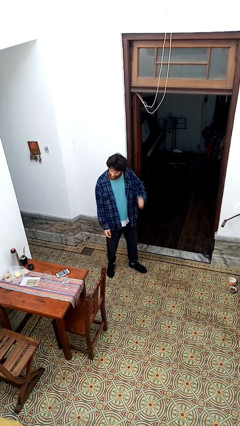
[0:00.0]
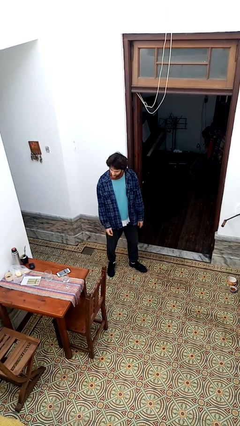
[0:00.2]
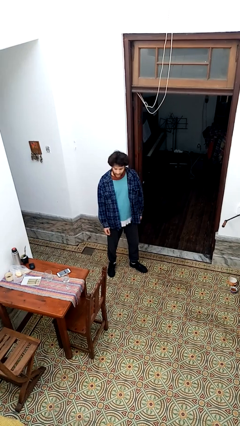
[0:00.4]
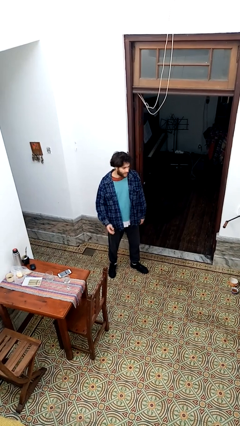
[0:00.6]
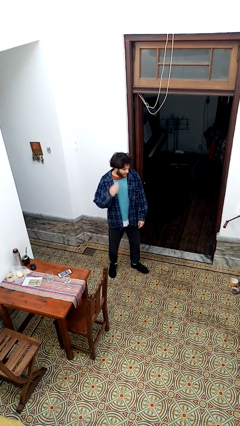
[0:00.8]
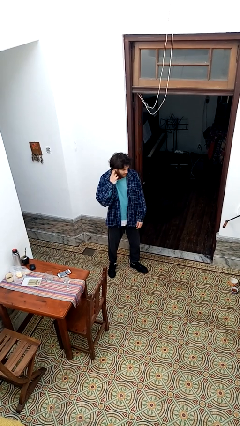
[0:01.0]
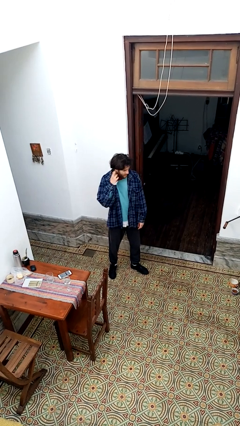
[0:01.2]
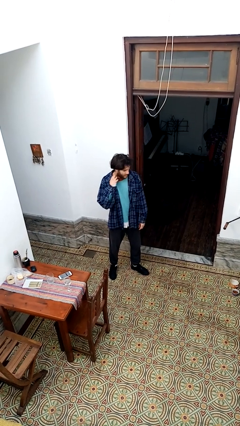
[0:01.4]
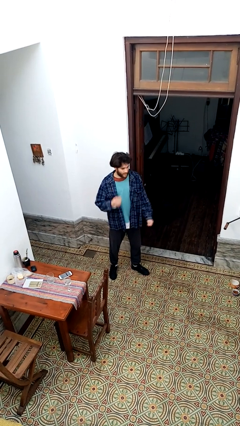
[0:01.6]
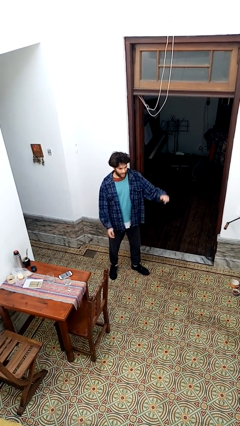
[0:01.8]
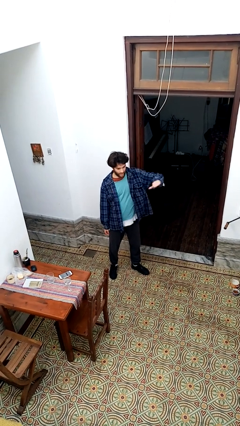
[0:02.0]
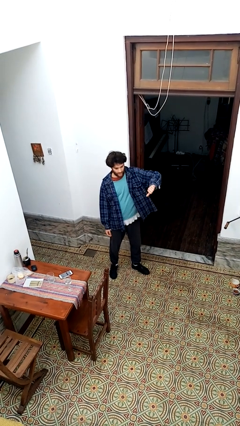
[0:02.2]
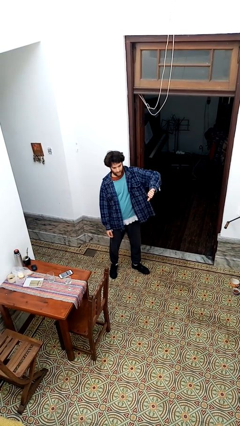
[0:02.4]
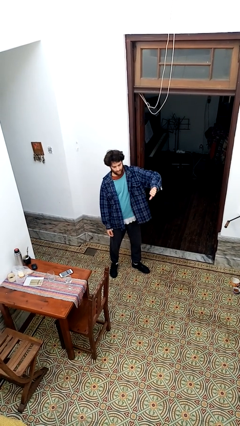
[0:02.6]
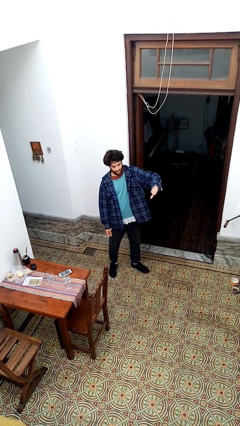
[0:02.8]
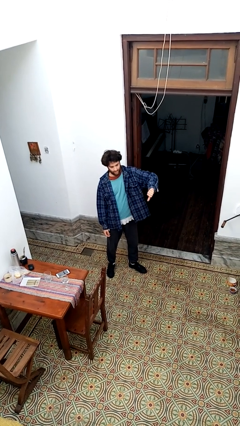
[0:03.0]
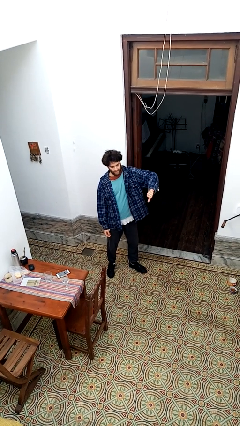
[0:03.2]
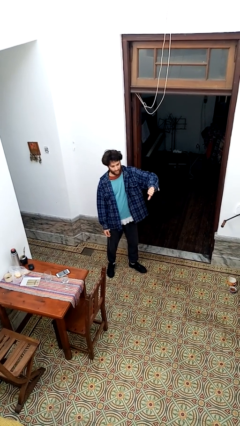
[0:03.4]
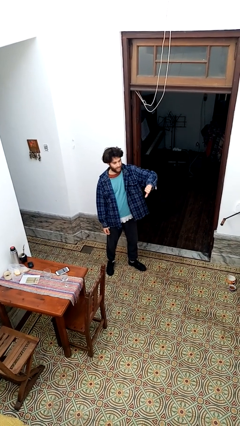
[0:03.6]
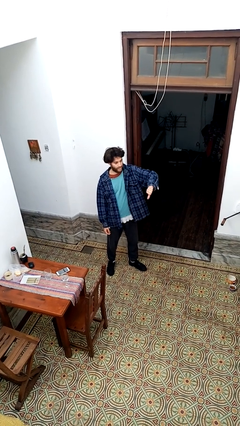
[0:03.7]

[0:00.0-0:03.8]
person gestures thumbs down

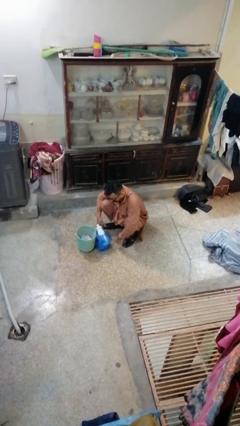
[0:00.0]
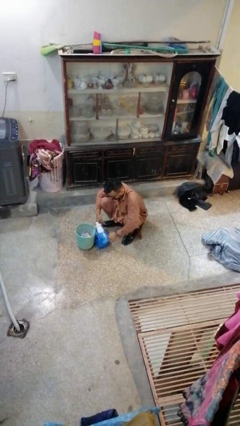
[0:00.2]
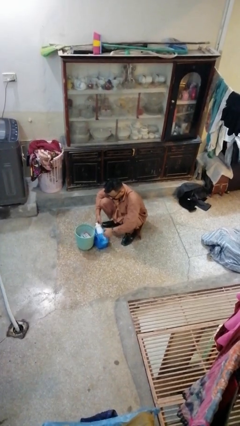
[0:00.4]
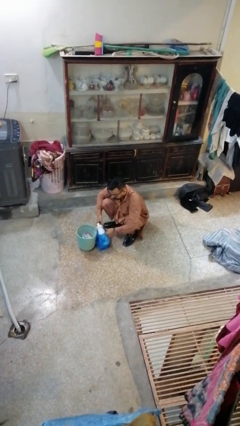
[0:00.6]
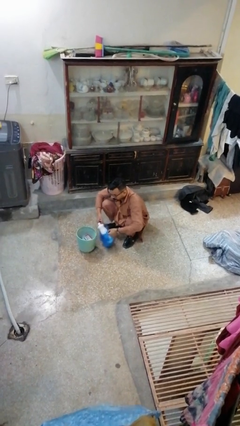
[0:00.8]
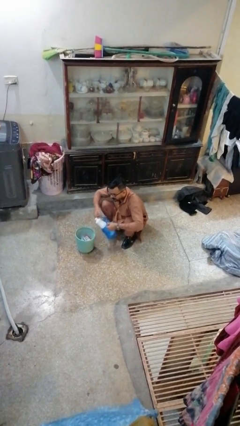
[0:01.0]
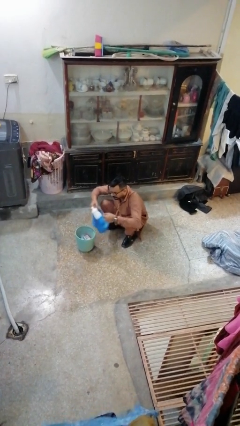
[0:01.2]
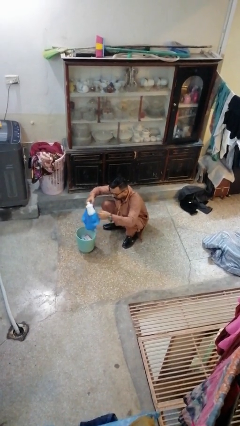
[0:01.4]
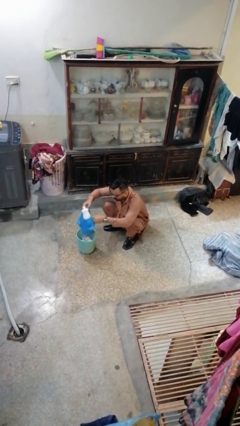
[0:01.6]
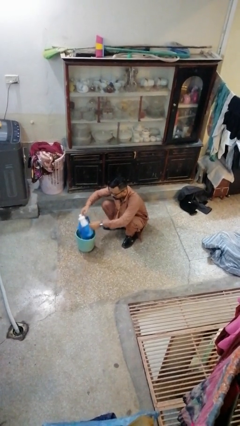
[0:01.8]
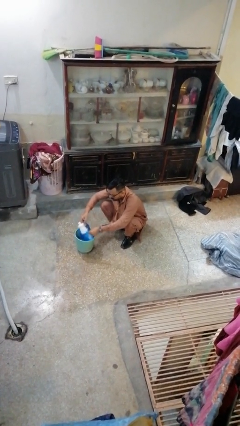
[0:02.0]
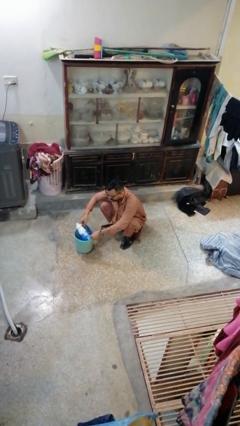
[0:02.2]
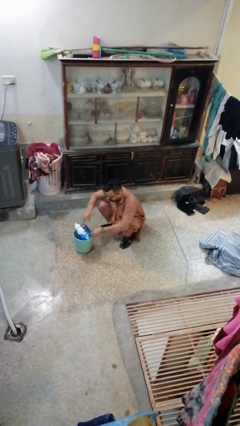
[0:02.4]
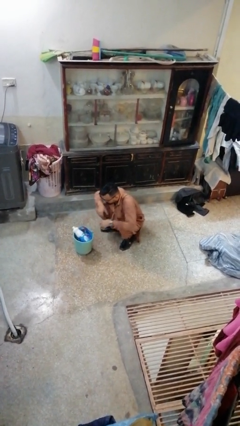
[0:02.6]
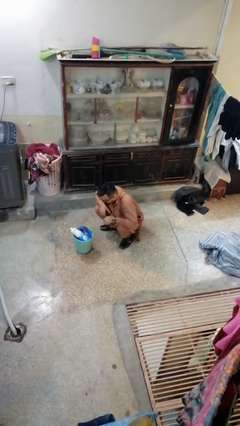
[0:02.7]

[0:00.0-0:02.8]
person inserts trashbag into trashcan

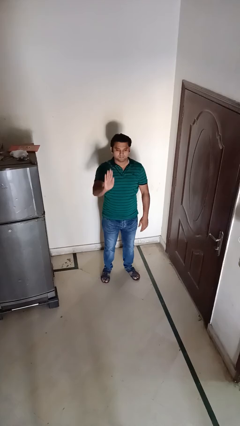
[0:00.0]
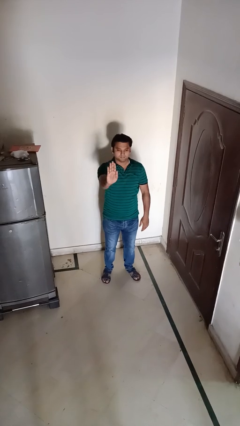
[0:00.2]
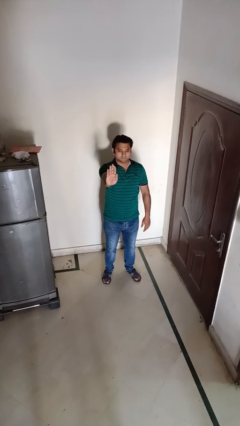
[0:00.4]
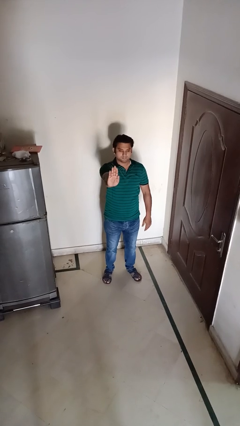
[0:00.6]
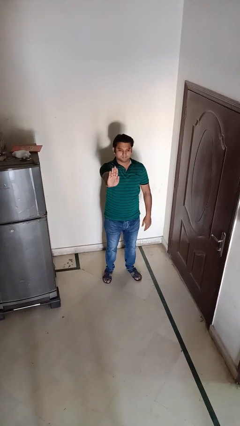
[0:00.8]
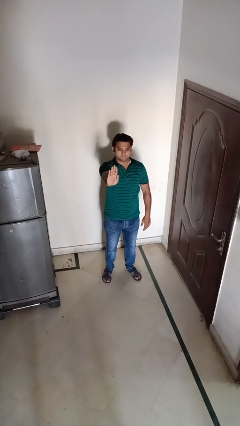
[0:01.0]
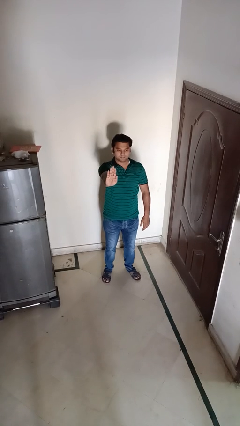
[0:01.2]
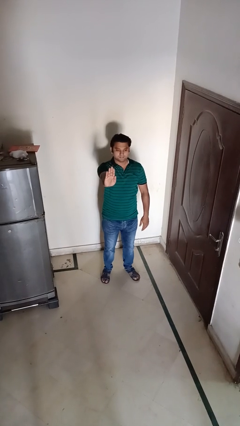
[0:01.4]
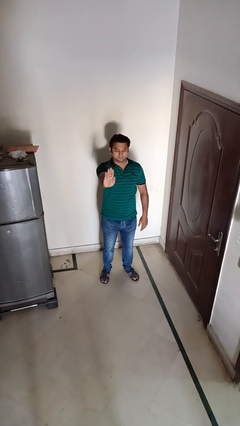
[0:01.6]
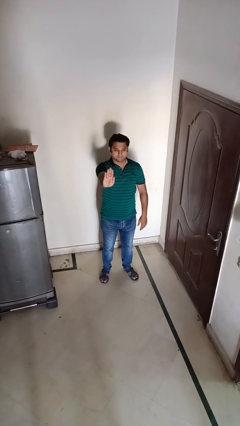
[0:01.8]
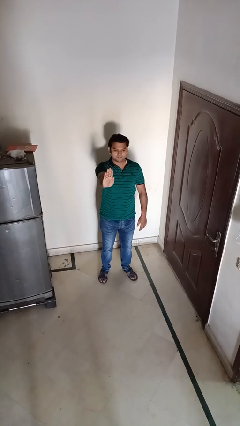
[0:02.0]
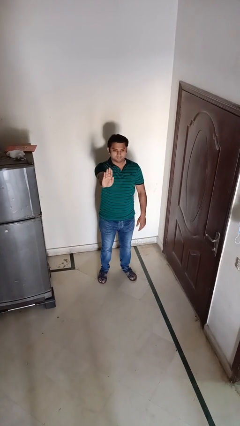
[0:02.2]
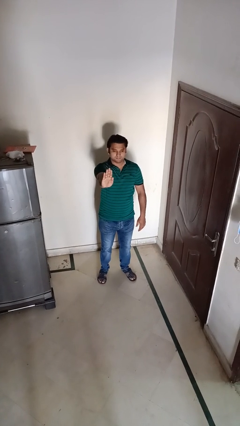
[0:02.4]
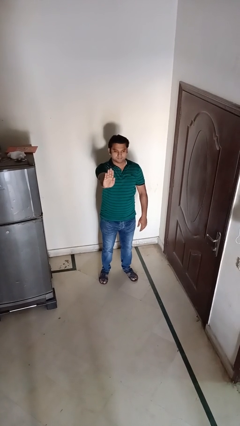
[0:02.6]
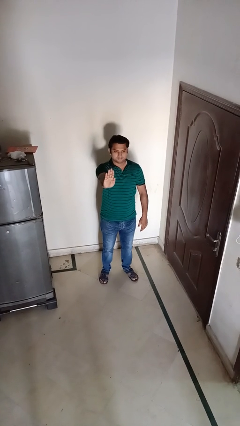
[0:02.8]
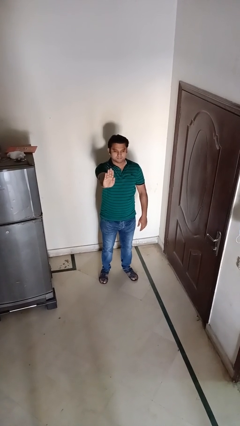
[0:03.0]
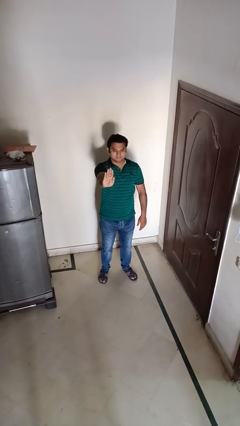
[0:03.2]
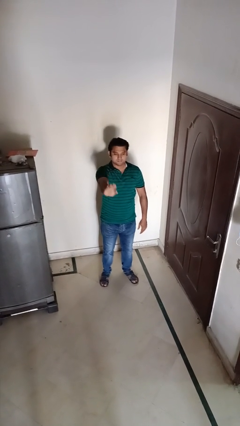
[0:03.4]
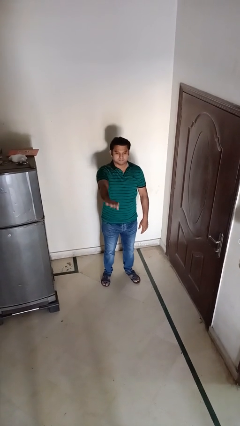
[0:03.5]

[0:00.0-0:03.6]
person gestures stop

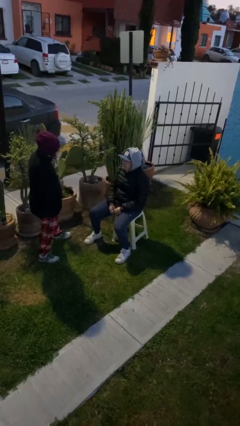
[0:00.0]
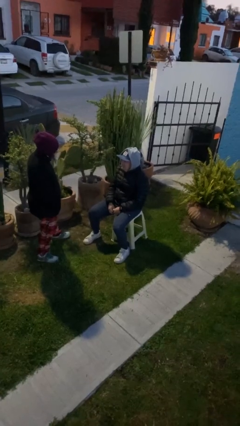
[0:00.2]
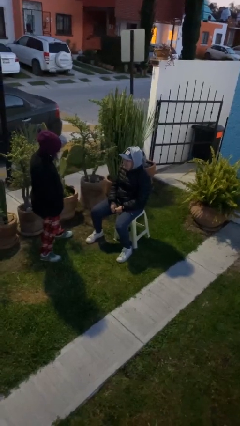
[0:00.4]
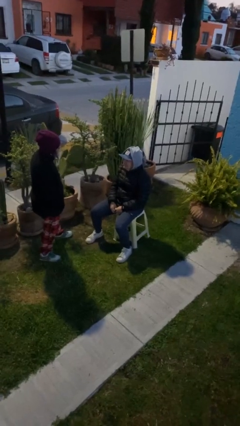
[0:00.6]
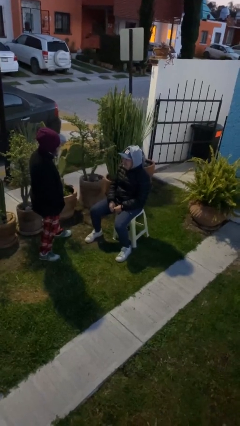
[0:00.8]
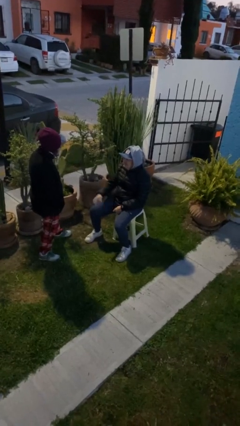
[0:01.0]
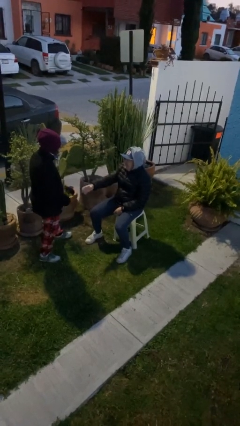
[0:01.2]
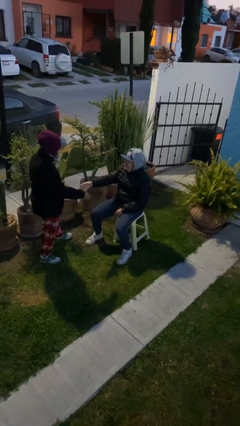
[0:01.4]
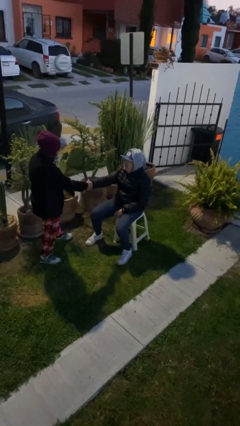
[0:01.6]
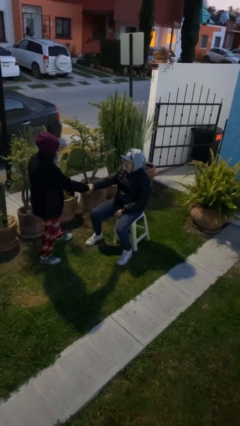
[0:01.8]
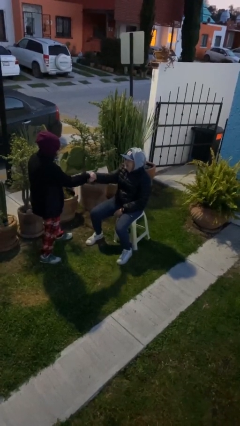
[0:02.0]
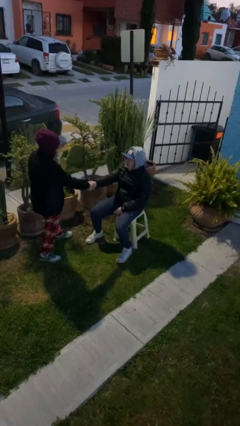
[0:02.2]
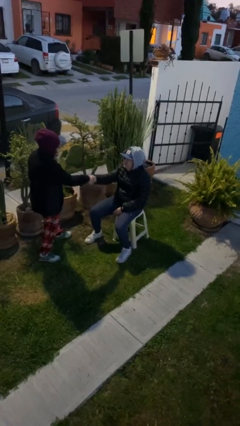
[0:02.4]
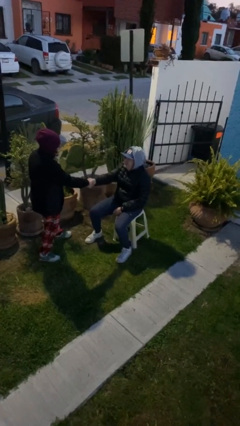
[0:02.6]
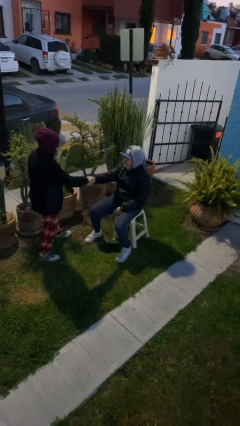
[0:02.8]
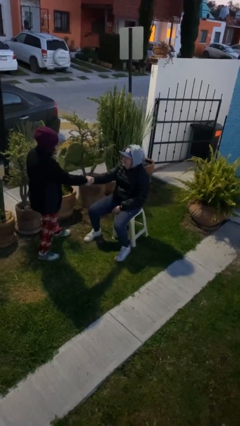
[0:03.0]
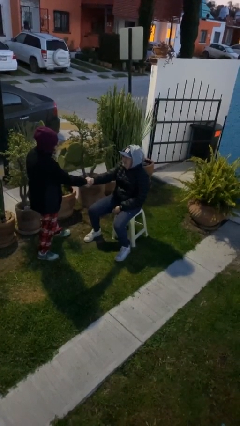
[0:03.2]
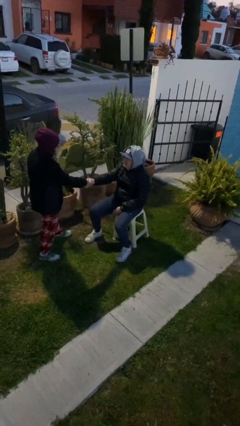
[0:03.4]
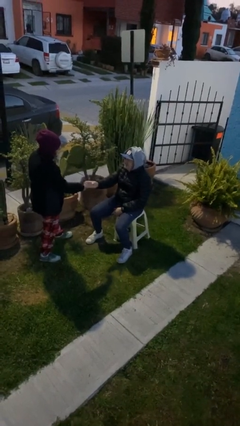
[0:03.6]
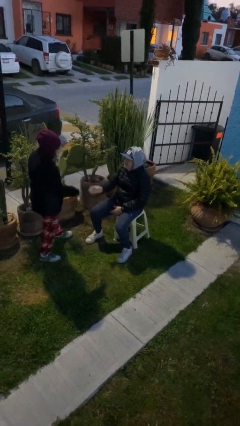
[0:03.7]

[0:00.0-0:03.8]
person shakes hand

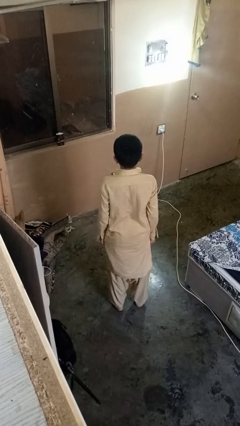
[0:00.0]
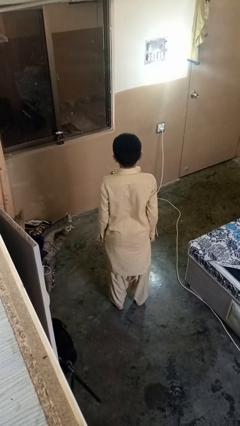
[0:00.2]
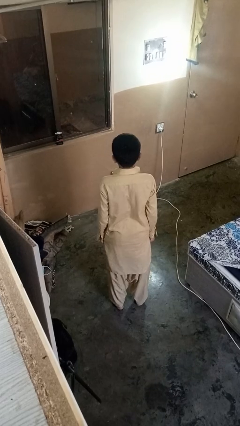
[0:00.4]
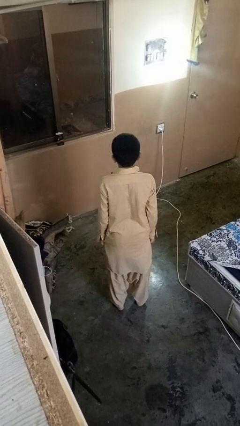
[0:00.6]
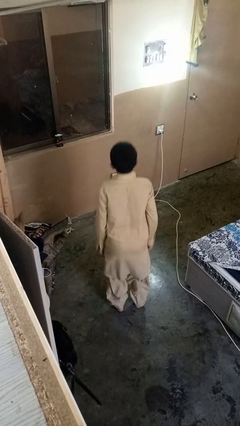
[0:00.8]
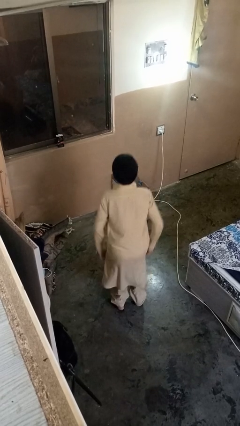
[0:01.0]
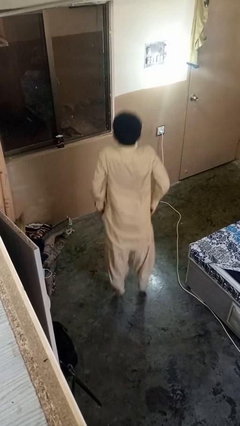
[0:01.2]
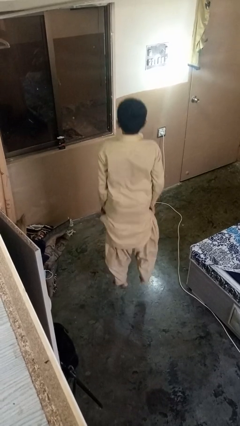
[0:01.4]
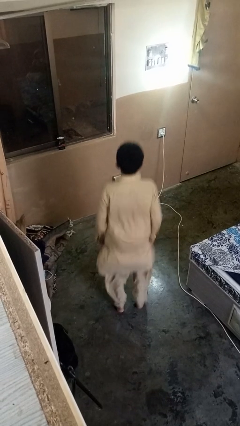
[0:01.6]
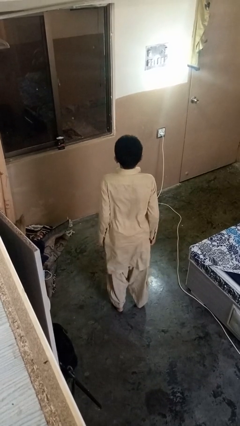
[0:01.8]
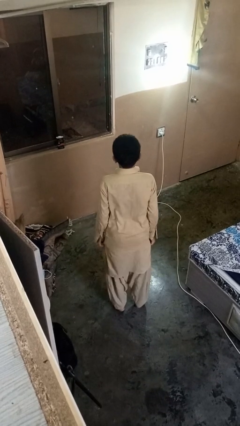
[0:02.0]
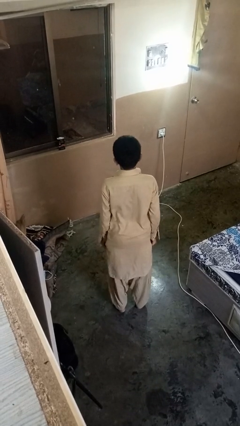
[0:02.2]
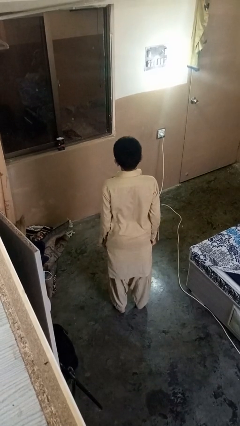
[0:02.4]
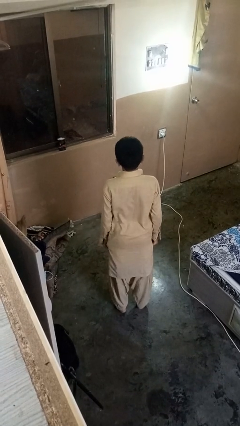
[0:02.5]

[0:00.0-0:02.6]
person jumps

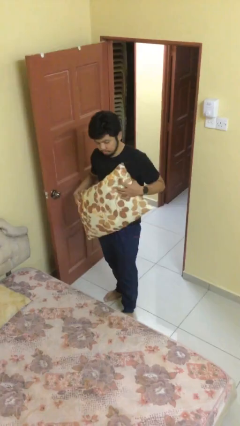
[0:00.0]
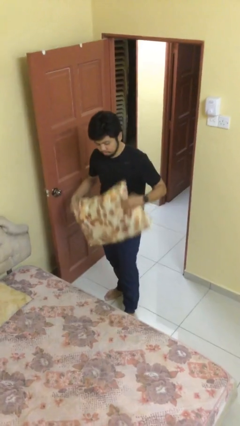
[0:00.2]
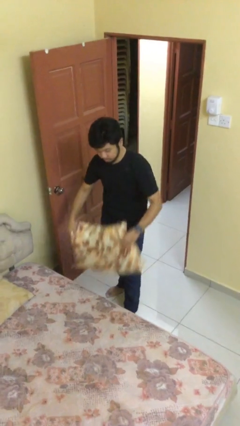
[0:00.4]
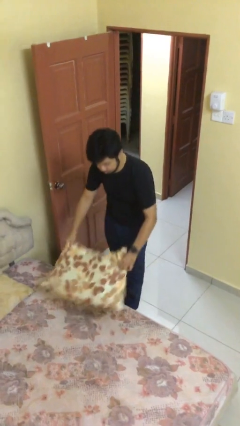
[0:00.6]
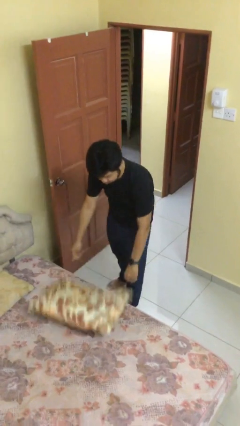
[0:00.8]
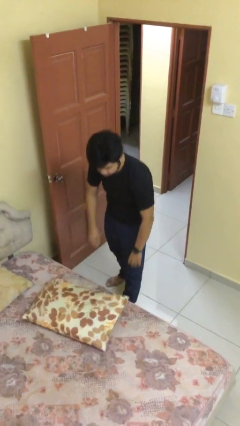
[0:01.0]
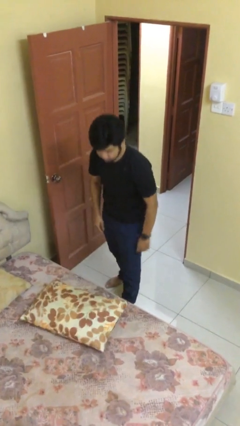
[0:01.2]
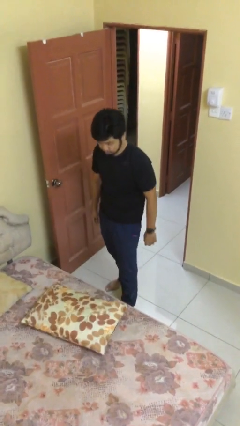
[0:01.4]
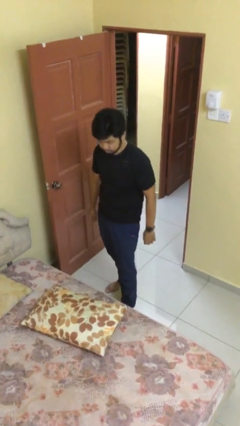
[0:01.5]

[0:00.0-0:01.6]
person puts down object on bed
